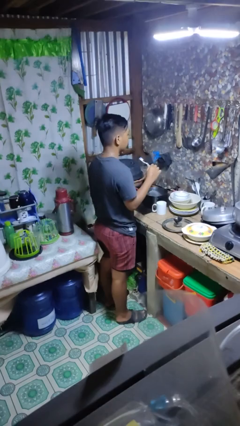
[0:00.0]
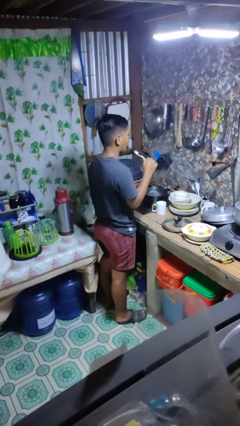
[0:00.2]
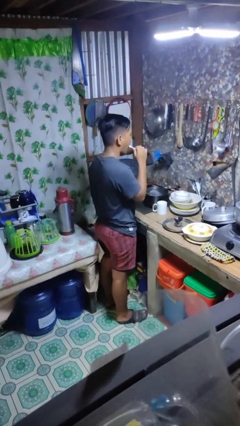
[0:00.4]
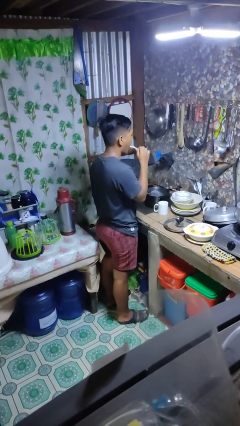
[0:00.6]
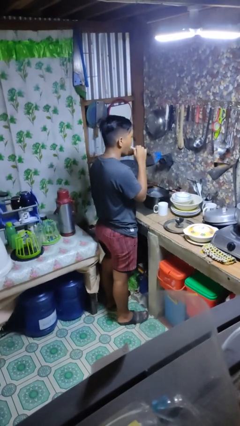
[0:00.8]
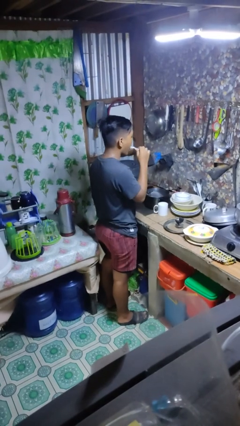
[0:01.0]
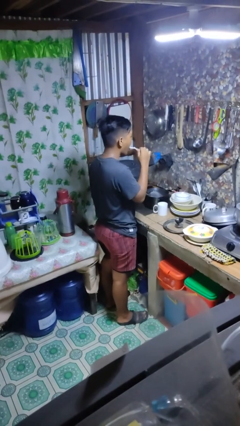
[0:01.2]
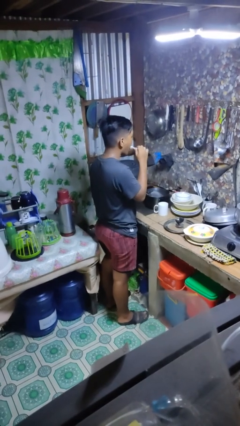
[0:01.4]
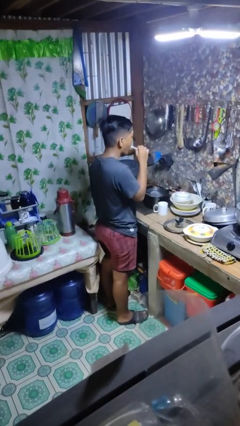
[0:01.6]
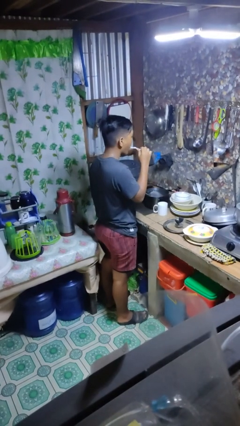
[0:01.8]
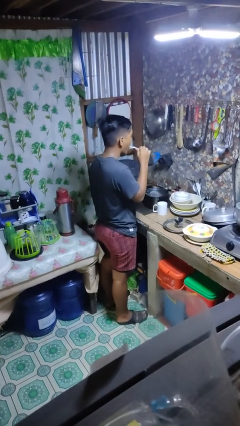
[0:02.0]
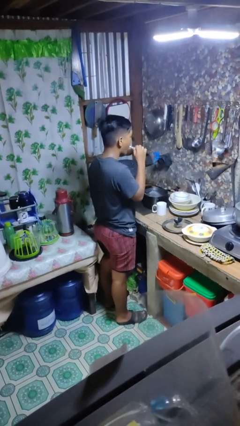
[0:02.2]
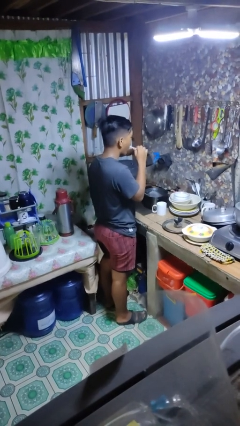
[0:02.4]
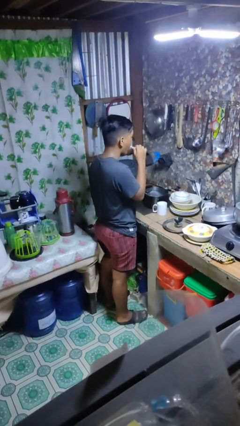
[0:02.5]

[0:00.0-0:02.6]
person brushes teeth

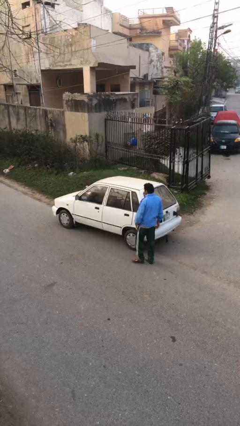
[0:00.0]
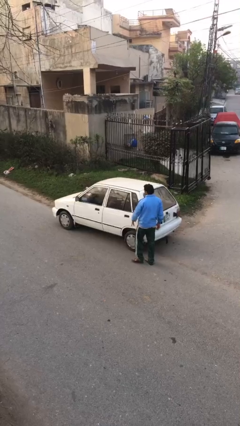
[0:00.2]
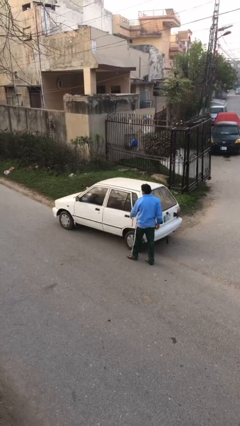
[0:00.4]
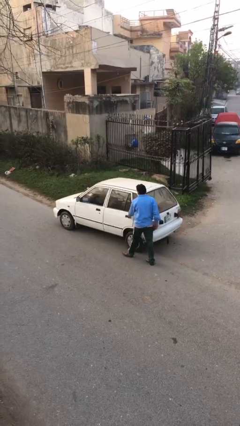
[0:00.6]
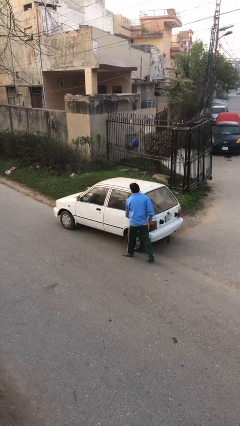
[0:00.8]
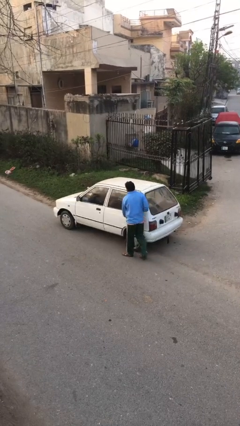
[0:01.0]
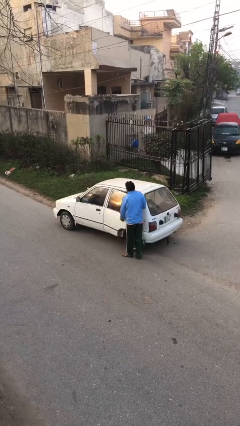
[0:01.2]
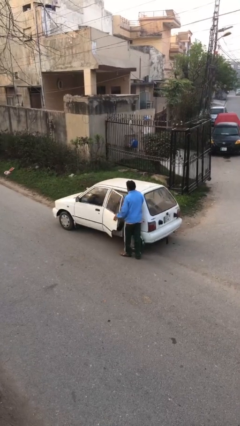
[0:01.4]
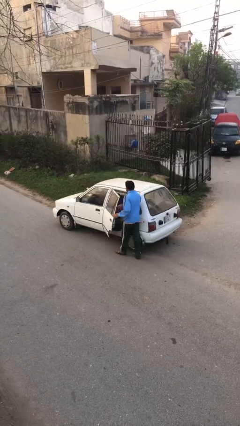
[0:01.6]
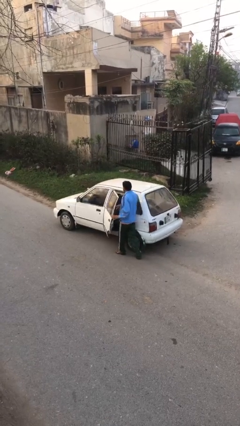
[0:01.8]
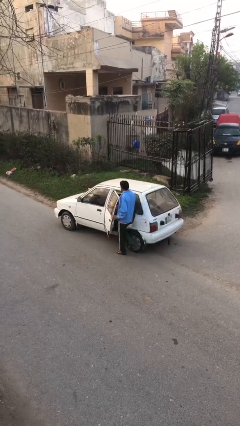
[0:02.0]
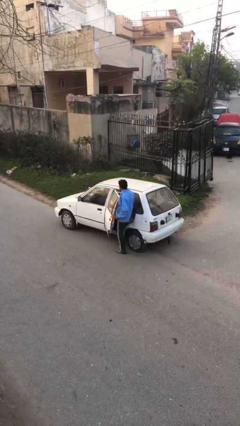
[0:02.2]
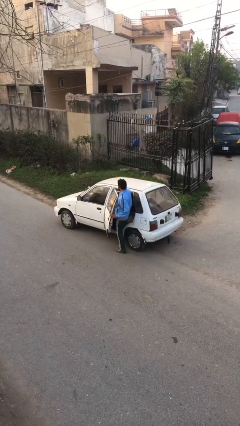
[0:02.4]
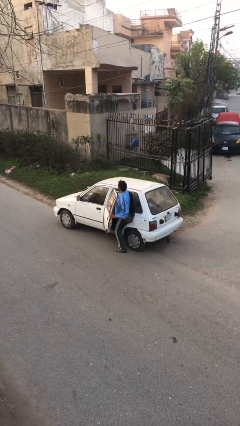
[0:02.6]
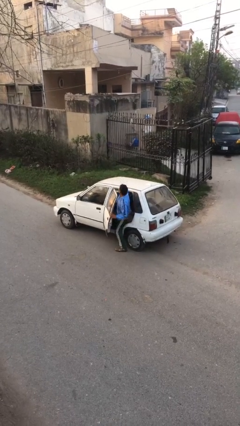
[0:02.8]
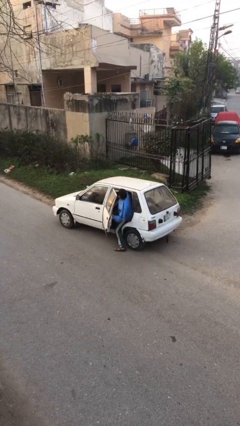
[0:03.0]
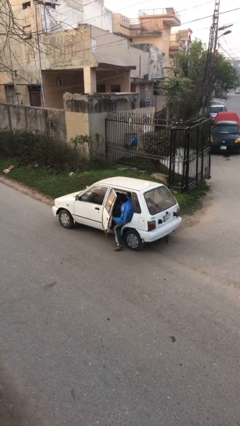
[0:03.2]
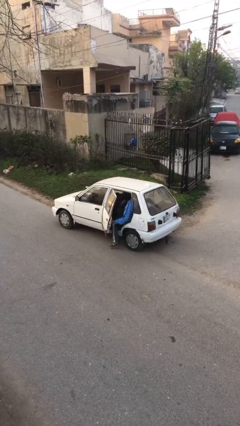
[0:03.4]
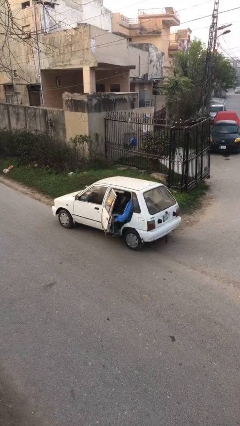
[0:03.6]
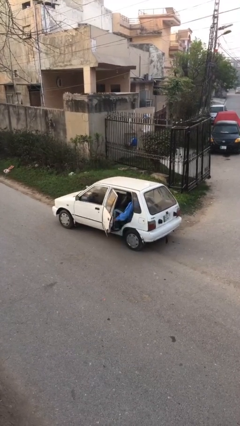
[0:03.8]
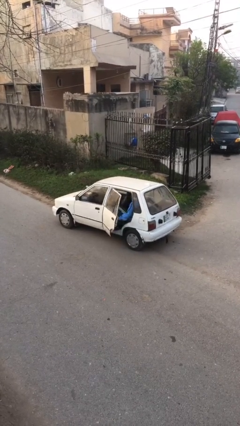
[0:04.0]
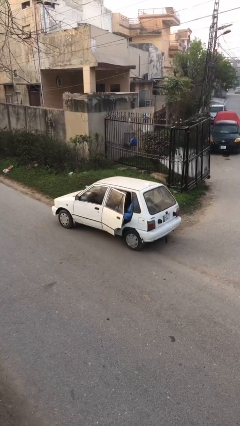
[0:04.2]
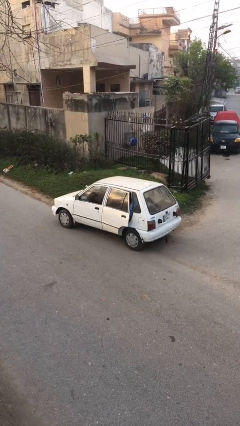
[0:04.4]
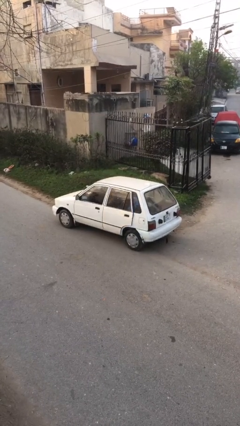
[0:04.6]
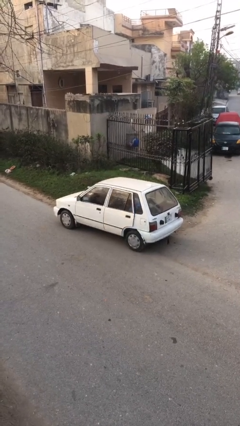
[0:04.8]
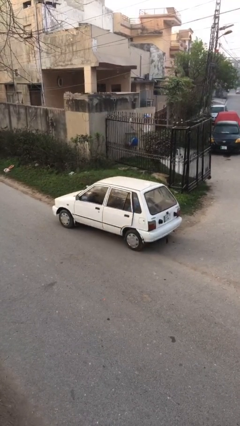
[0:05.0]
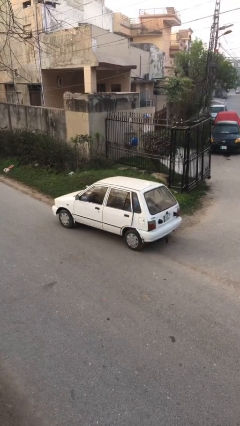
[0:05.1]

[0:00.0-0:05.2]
car picks up person

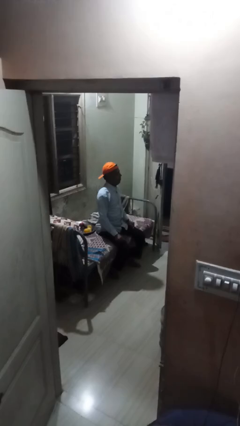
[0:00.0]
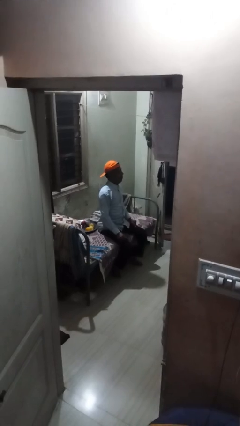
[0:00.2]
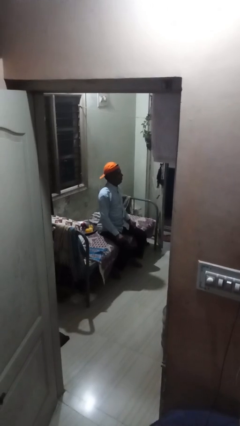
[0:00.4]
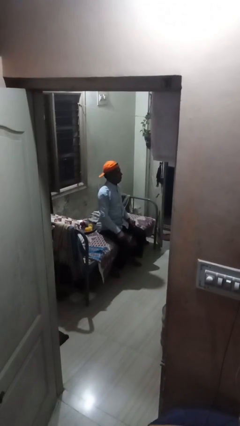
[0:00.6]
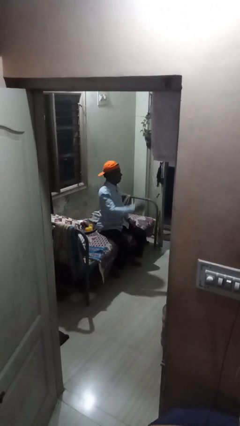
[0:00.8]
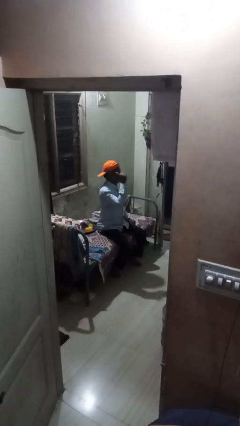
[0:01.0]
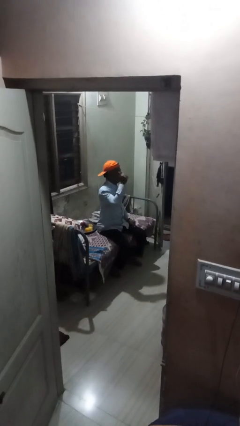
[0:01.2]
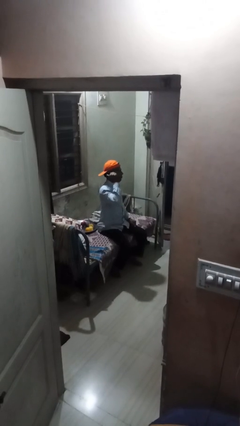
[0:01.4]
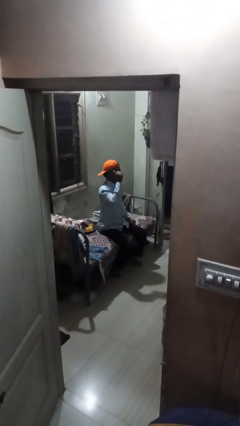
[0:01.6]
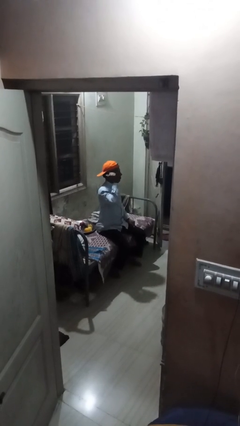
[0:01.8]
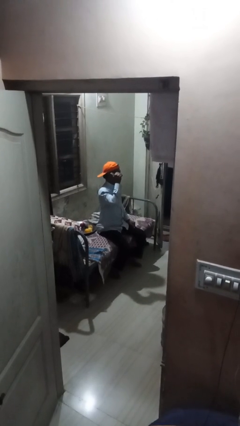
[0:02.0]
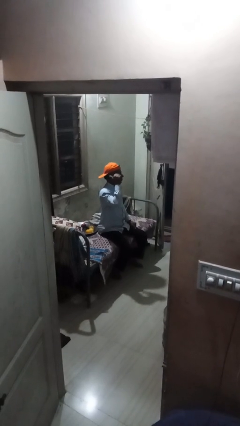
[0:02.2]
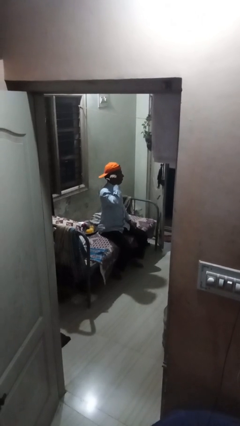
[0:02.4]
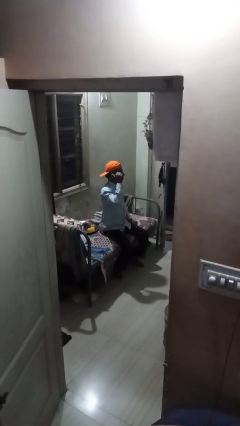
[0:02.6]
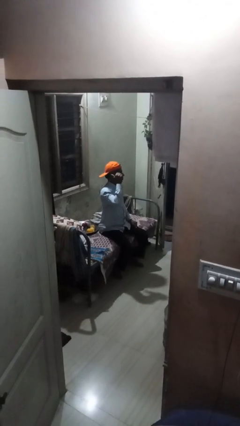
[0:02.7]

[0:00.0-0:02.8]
person gestures behind me

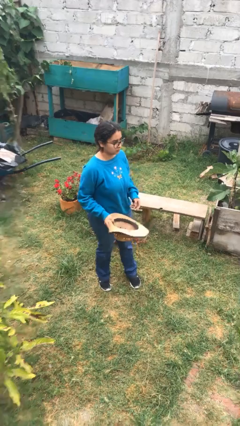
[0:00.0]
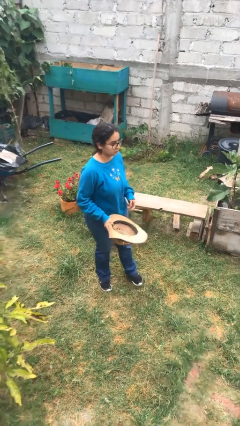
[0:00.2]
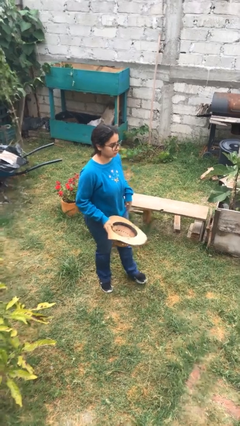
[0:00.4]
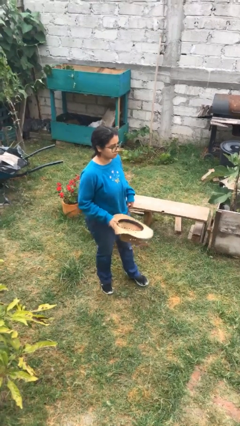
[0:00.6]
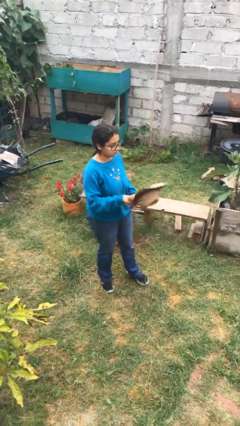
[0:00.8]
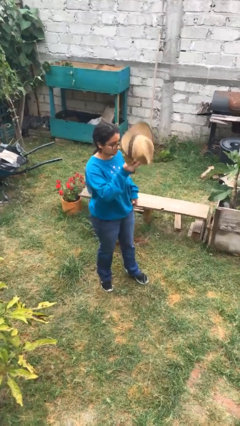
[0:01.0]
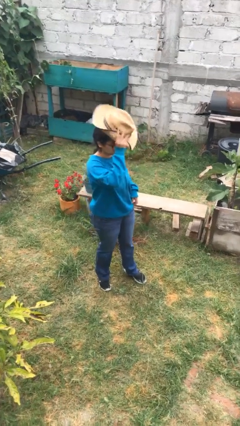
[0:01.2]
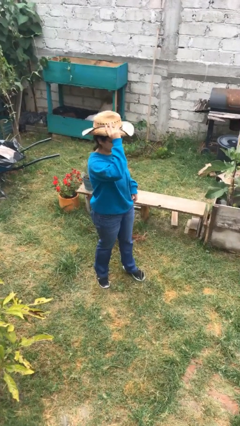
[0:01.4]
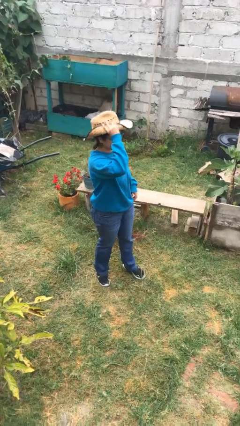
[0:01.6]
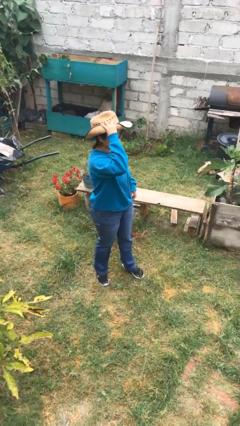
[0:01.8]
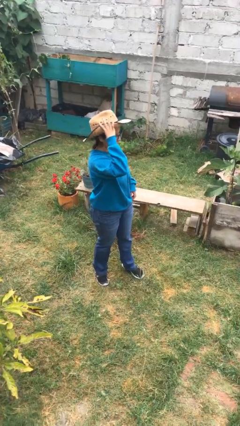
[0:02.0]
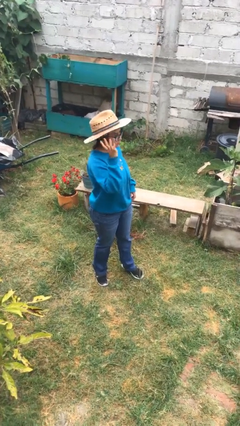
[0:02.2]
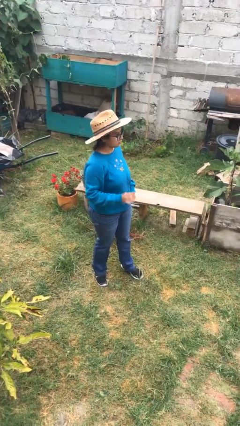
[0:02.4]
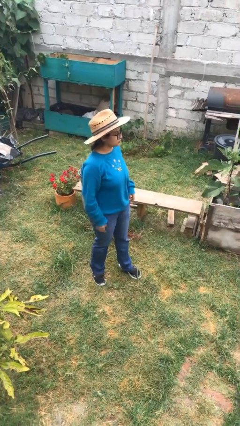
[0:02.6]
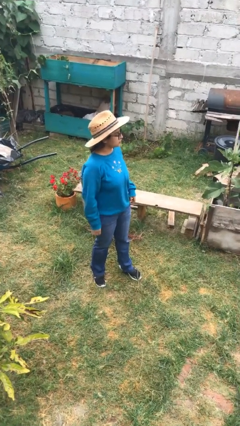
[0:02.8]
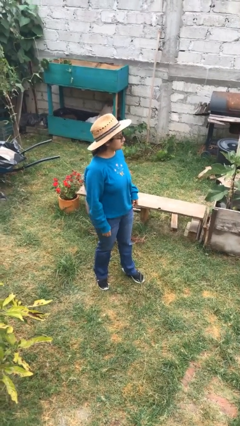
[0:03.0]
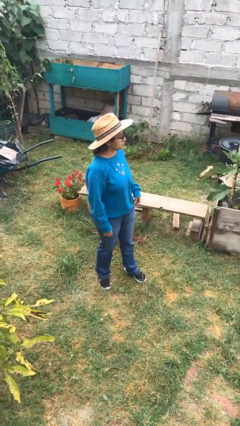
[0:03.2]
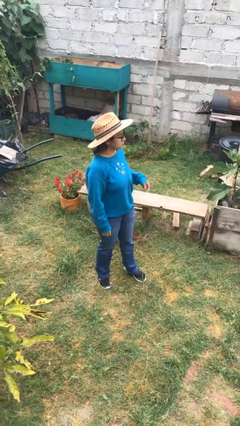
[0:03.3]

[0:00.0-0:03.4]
person puts on hat

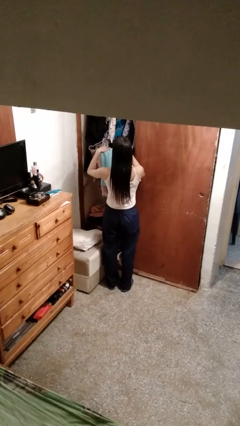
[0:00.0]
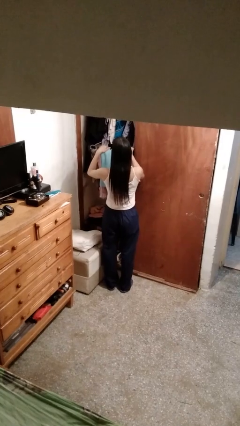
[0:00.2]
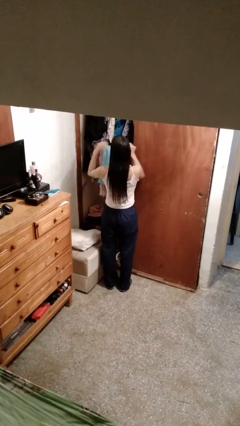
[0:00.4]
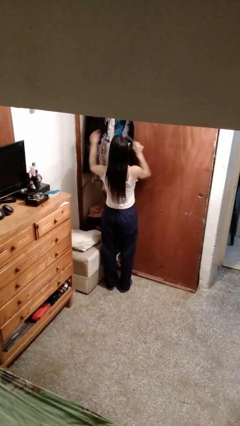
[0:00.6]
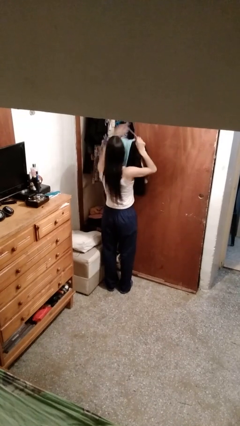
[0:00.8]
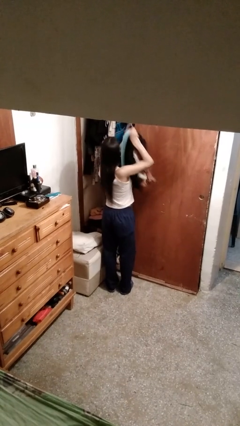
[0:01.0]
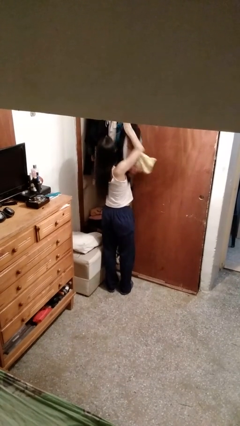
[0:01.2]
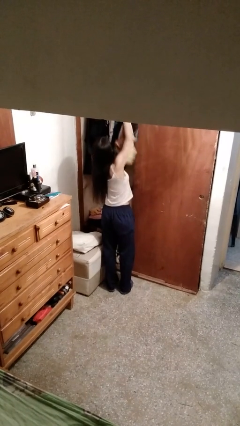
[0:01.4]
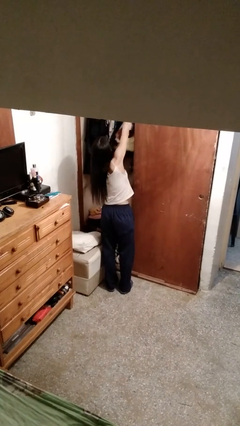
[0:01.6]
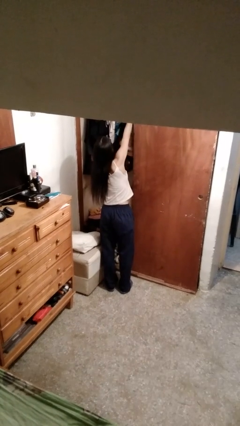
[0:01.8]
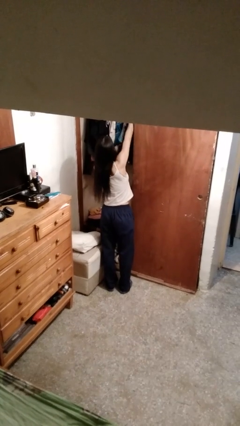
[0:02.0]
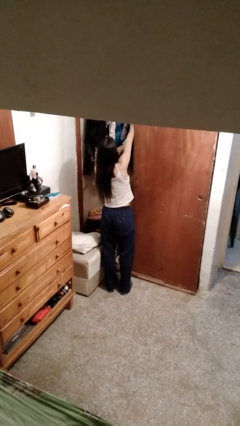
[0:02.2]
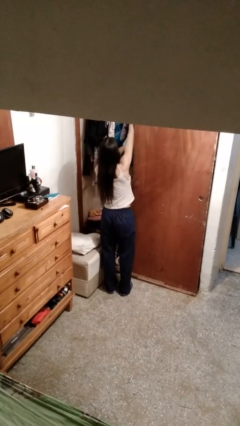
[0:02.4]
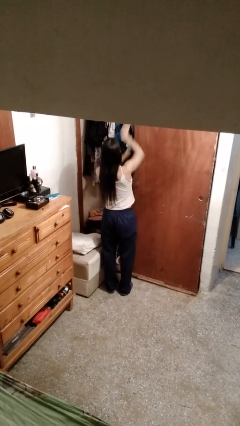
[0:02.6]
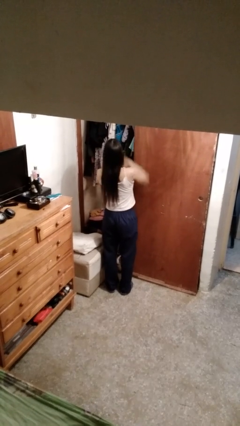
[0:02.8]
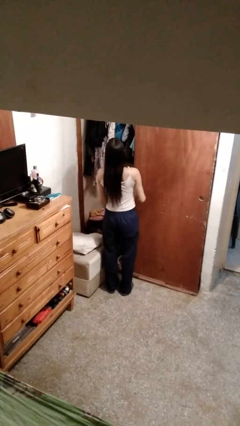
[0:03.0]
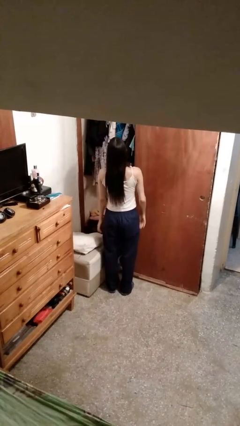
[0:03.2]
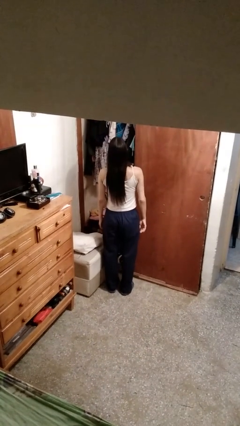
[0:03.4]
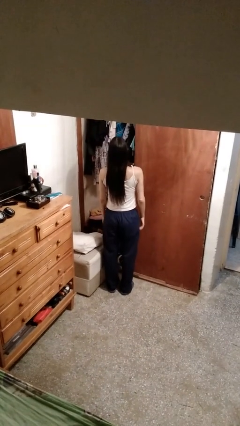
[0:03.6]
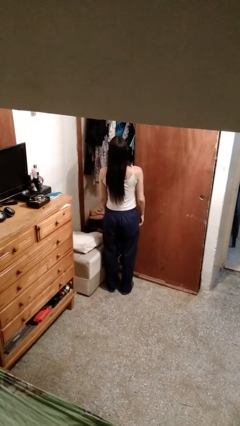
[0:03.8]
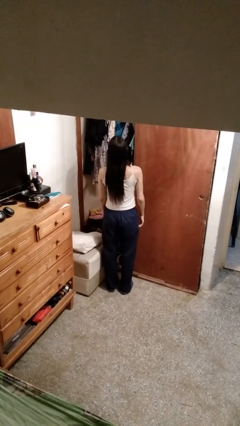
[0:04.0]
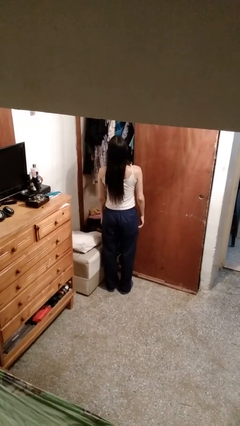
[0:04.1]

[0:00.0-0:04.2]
person puts clothes into closet
